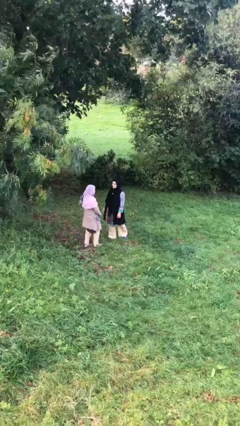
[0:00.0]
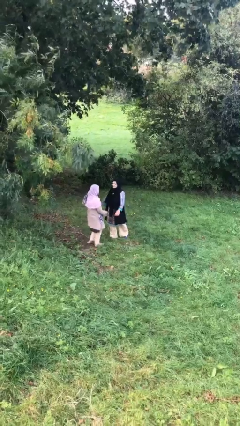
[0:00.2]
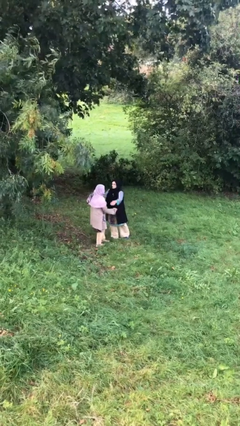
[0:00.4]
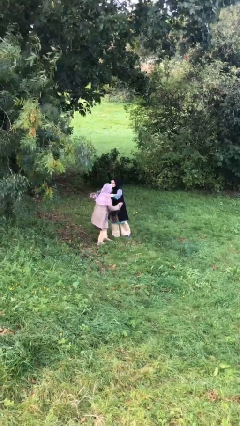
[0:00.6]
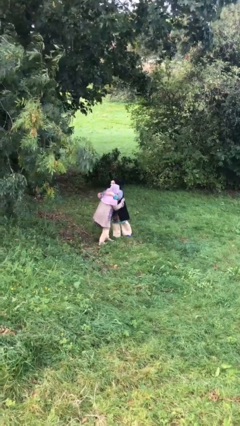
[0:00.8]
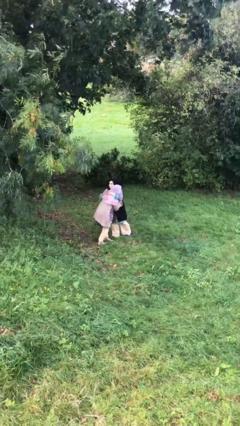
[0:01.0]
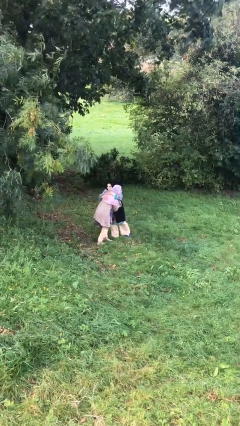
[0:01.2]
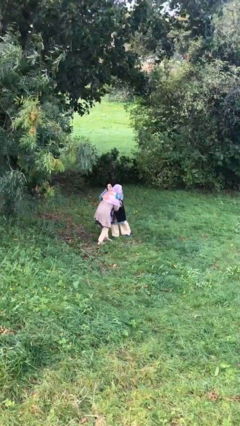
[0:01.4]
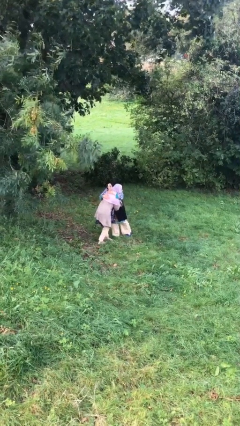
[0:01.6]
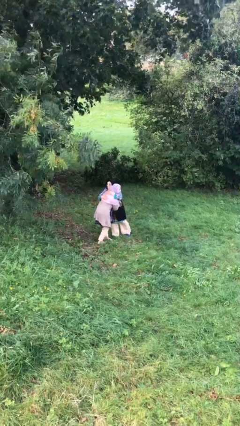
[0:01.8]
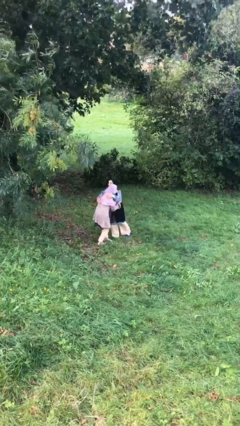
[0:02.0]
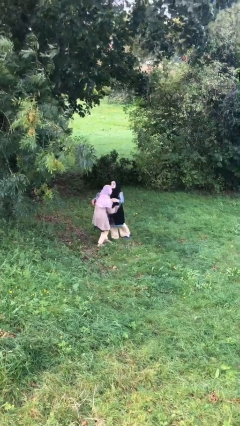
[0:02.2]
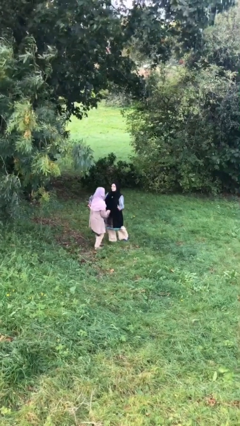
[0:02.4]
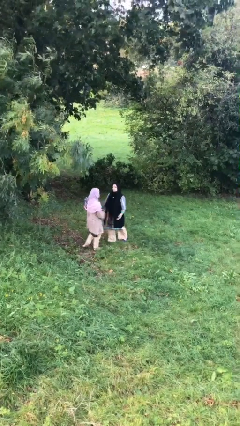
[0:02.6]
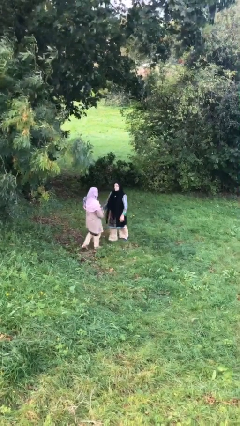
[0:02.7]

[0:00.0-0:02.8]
person embraces person

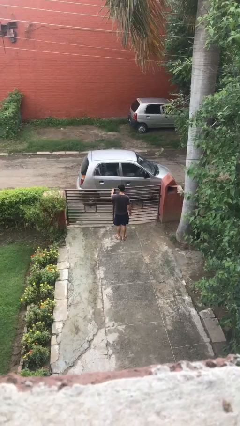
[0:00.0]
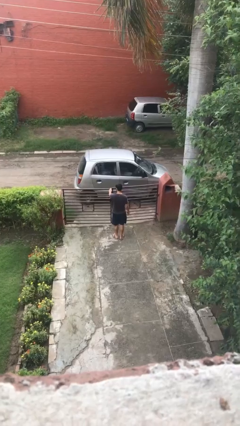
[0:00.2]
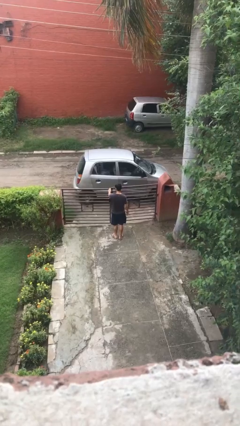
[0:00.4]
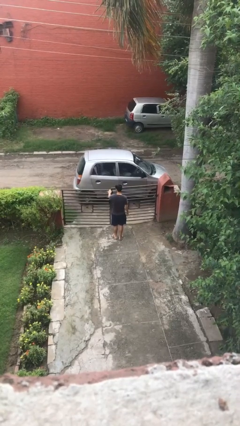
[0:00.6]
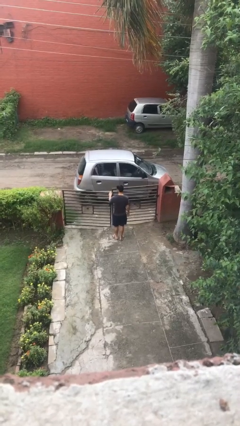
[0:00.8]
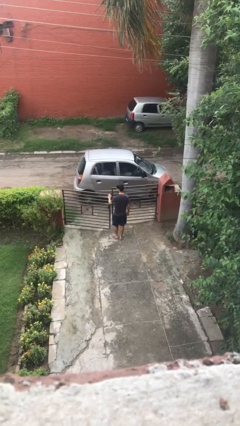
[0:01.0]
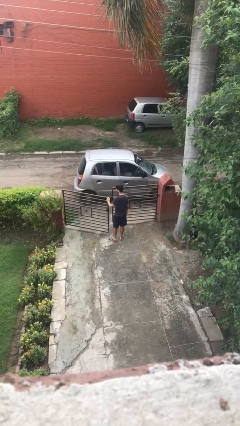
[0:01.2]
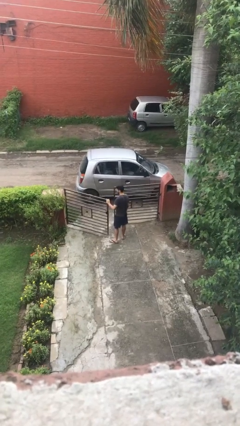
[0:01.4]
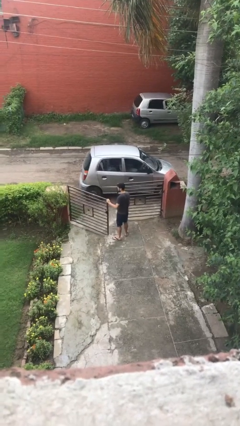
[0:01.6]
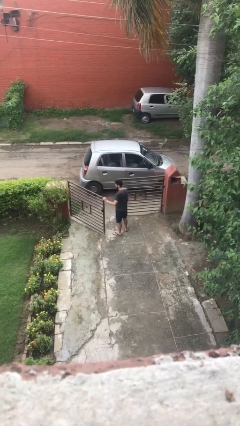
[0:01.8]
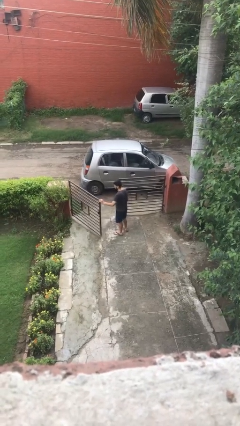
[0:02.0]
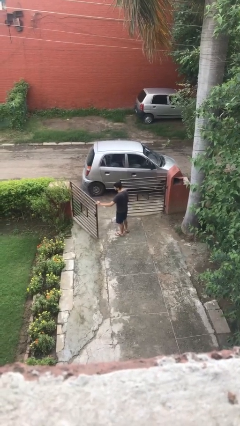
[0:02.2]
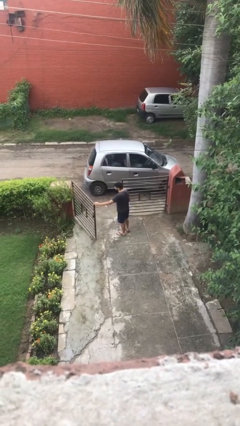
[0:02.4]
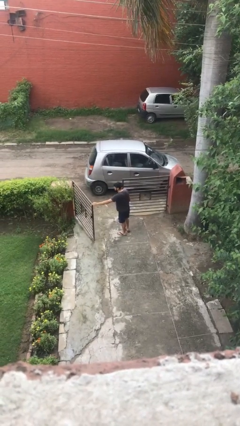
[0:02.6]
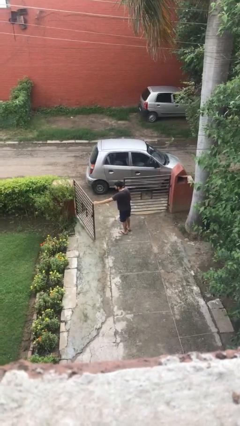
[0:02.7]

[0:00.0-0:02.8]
person opens gate

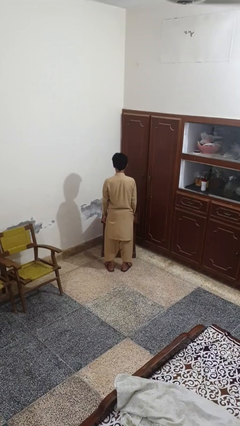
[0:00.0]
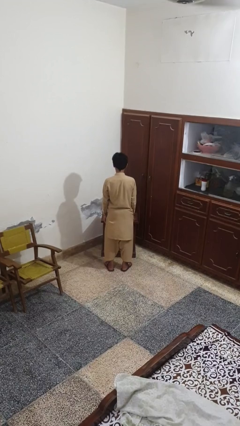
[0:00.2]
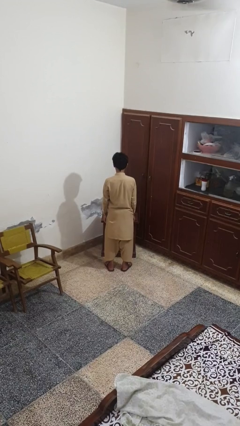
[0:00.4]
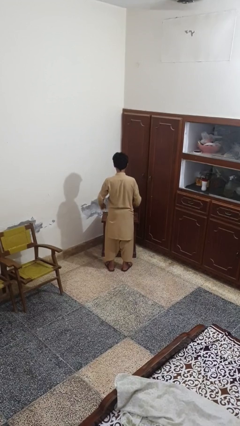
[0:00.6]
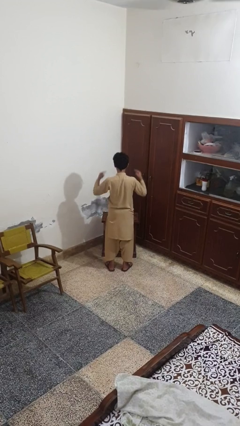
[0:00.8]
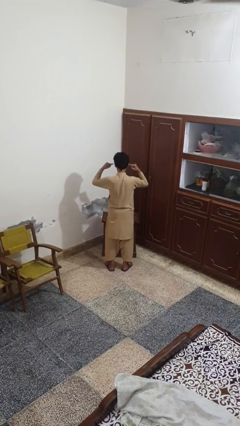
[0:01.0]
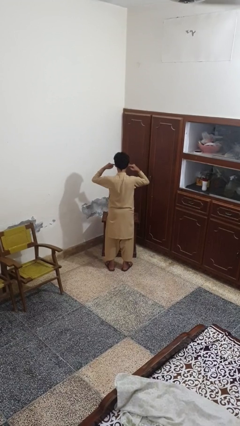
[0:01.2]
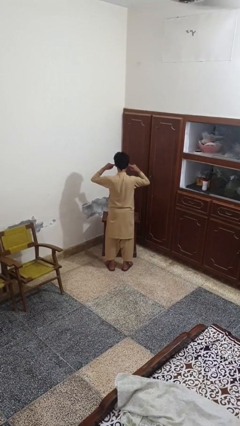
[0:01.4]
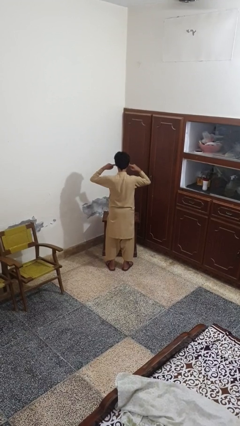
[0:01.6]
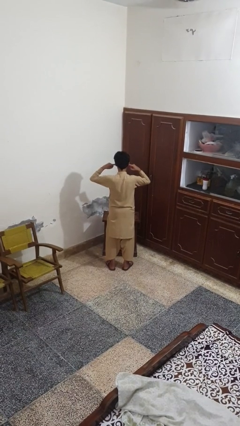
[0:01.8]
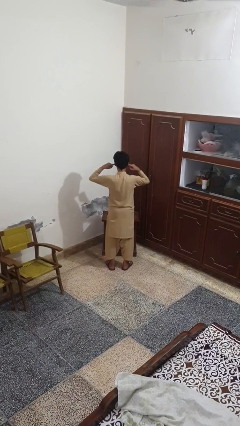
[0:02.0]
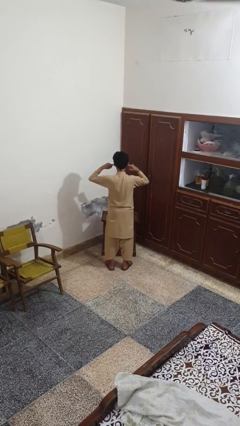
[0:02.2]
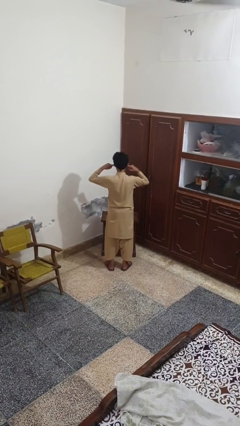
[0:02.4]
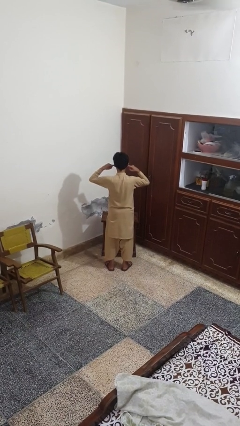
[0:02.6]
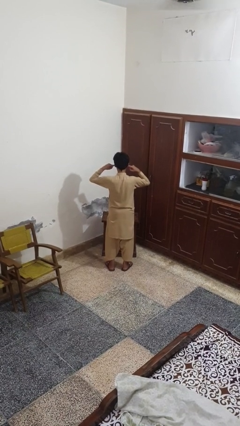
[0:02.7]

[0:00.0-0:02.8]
person puts fingers in ear

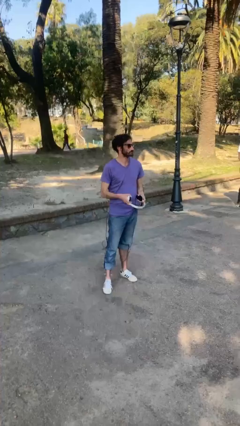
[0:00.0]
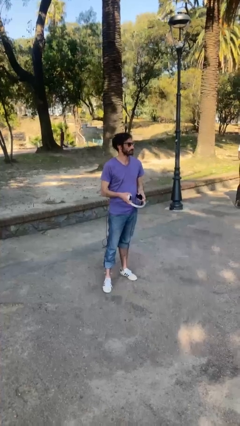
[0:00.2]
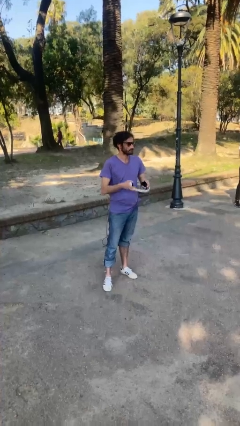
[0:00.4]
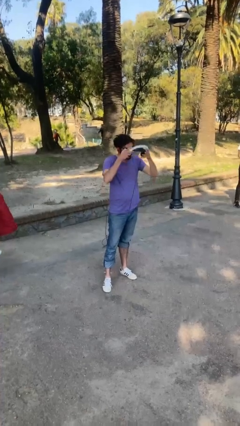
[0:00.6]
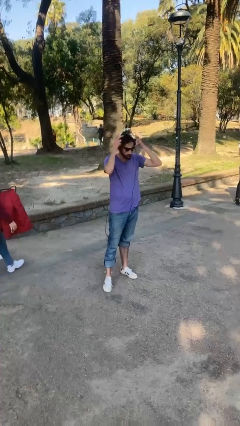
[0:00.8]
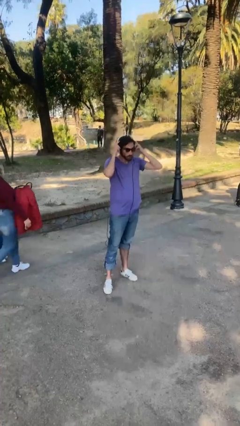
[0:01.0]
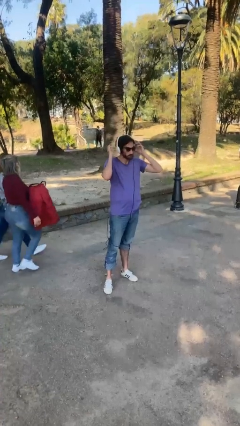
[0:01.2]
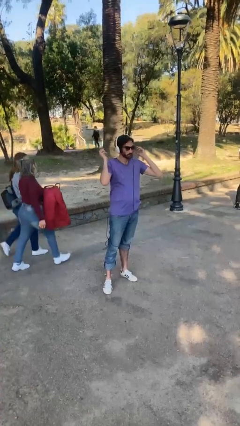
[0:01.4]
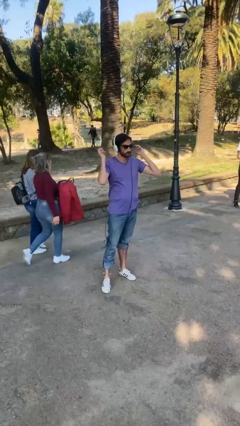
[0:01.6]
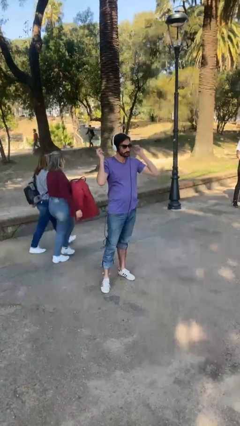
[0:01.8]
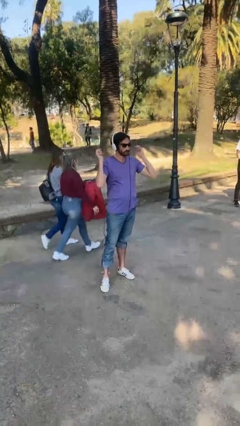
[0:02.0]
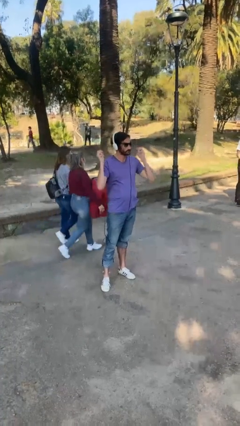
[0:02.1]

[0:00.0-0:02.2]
person puts on headphones

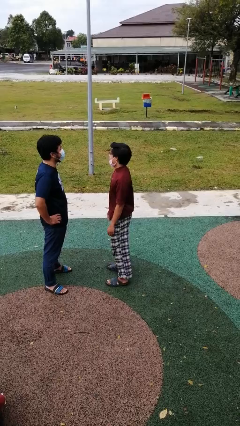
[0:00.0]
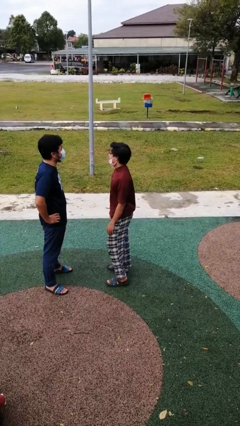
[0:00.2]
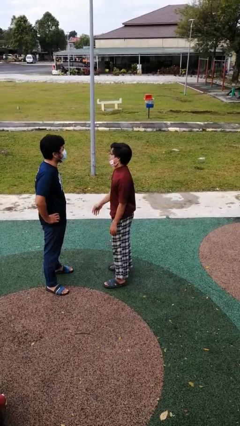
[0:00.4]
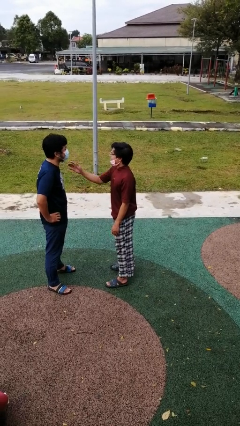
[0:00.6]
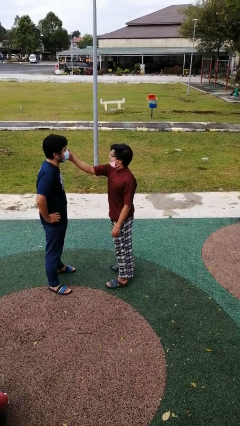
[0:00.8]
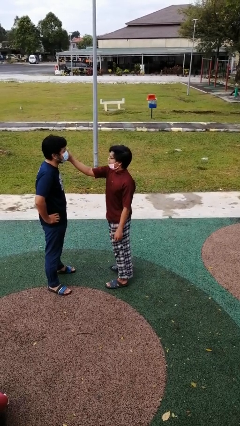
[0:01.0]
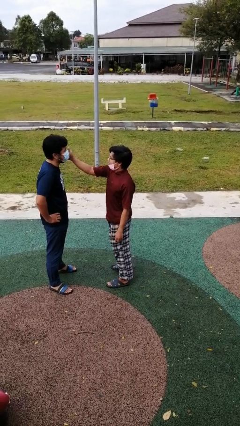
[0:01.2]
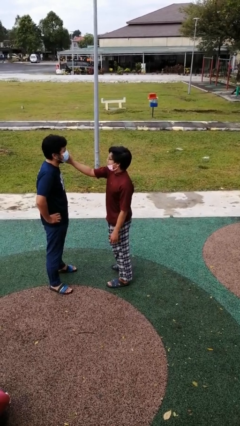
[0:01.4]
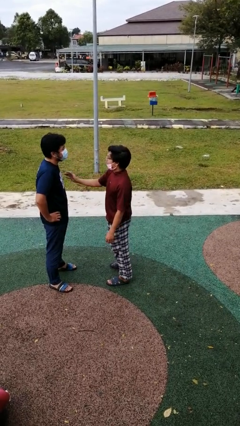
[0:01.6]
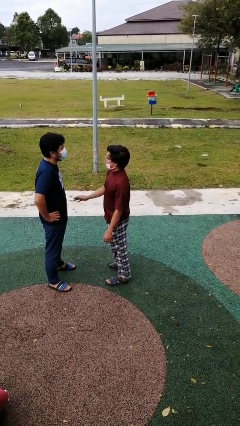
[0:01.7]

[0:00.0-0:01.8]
person touches face of person

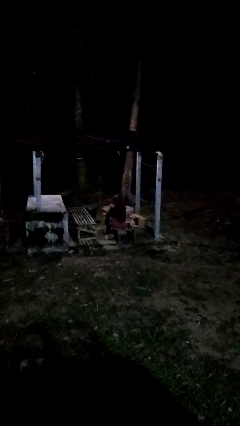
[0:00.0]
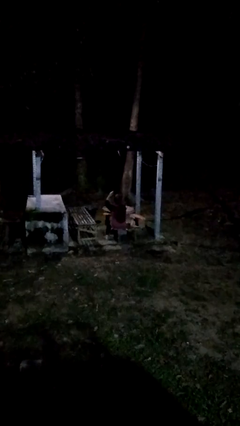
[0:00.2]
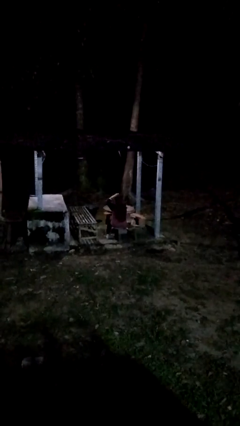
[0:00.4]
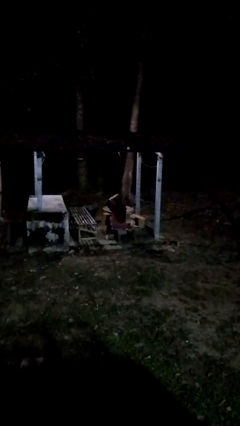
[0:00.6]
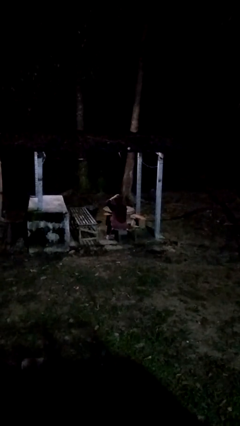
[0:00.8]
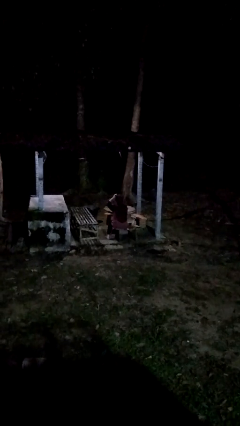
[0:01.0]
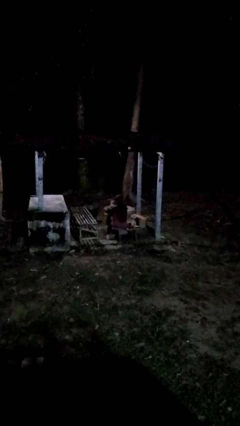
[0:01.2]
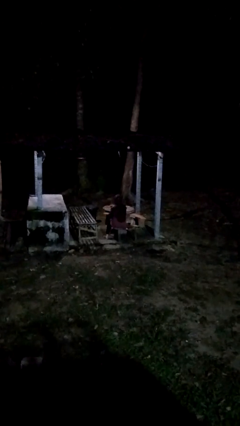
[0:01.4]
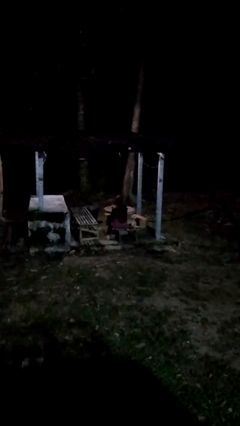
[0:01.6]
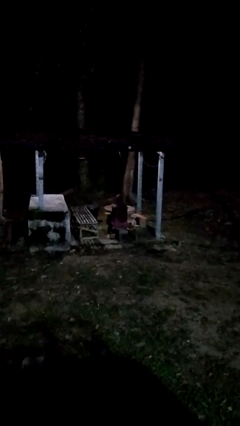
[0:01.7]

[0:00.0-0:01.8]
person pats head

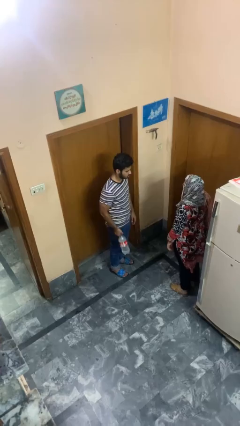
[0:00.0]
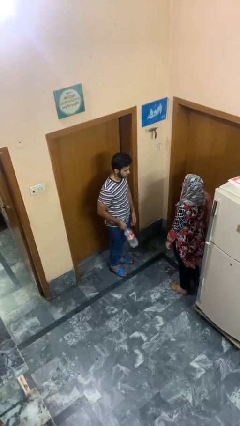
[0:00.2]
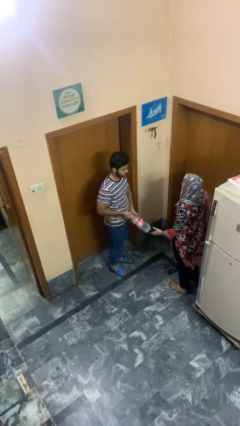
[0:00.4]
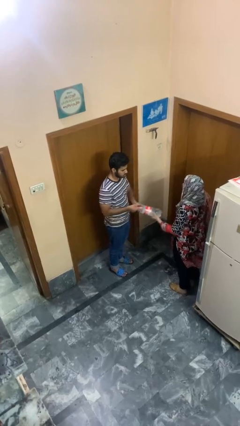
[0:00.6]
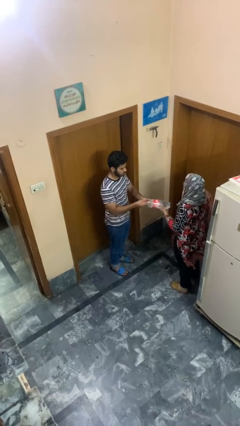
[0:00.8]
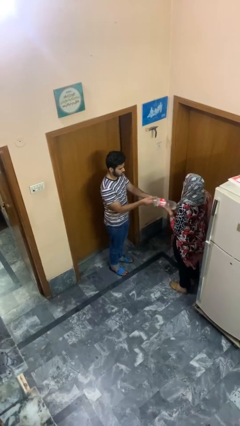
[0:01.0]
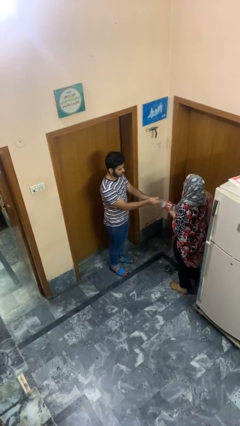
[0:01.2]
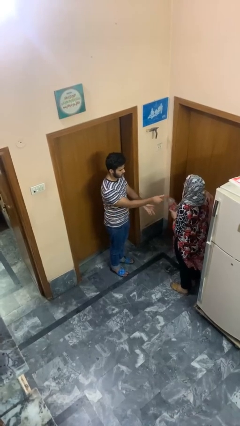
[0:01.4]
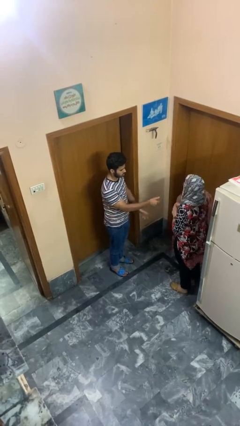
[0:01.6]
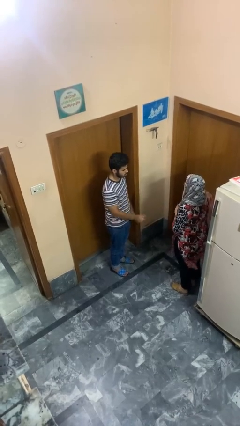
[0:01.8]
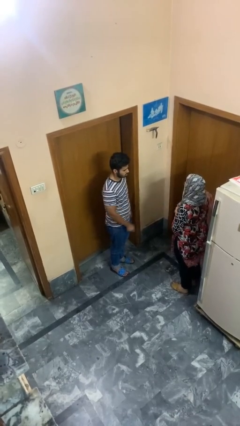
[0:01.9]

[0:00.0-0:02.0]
person transfers object to person

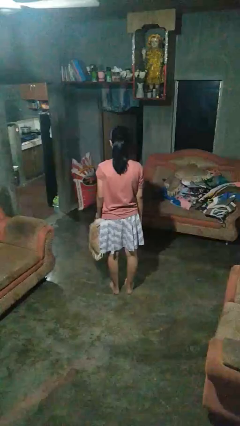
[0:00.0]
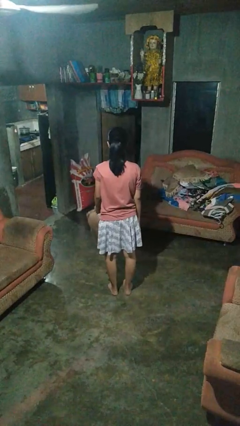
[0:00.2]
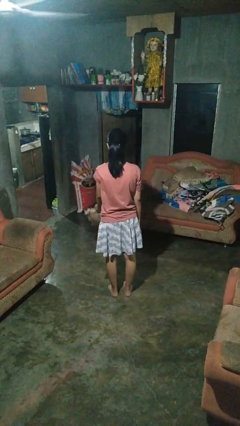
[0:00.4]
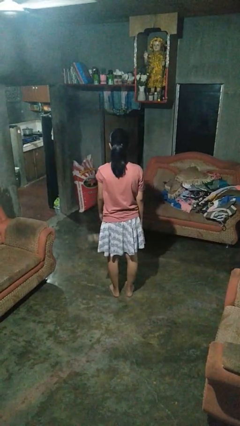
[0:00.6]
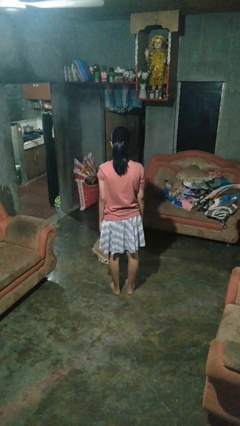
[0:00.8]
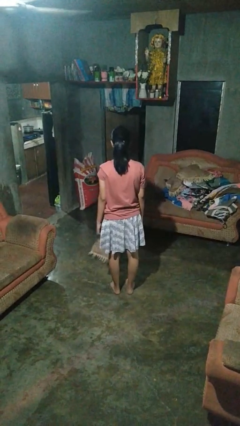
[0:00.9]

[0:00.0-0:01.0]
person throws object to ground
